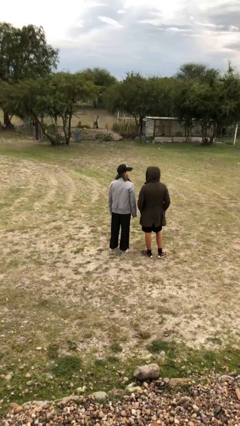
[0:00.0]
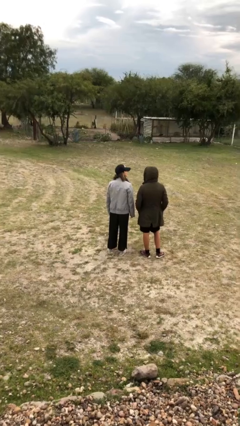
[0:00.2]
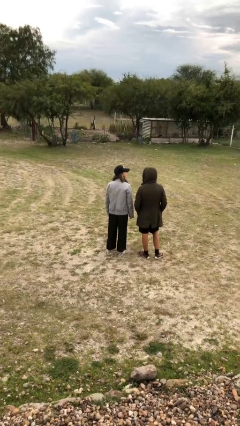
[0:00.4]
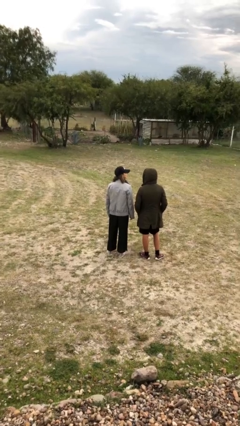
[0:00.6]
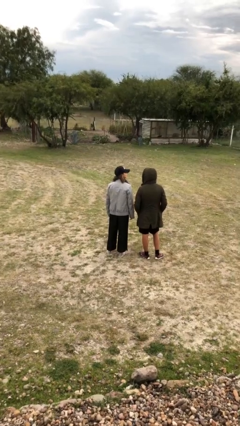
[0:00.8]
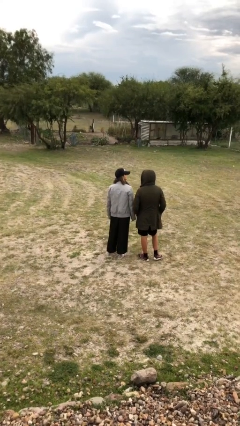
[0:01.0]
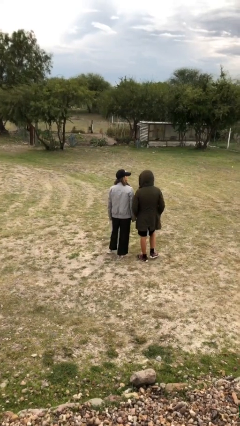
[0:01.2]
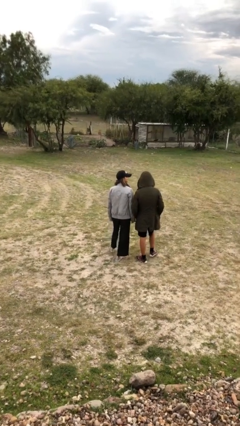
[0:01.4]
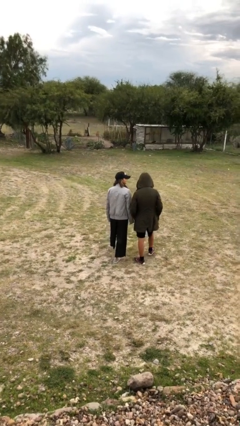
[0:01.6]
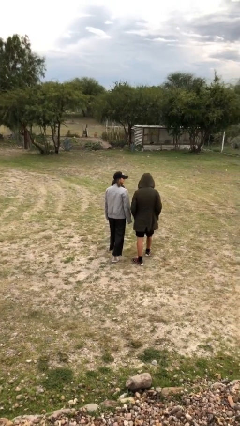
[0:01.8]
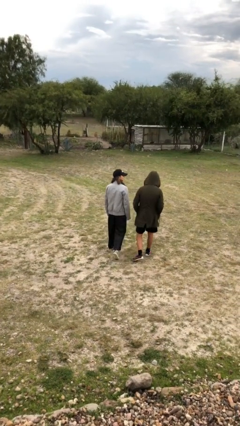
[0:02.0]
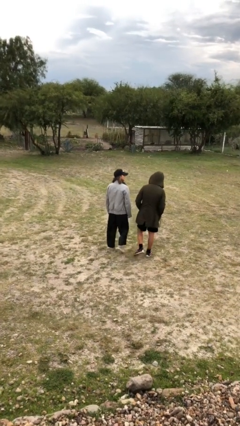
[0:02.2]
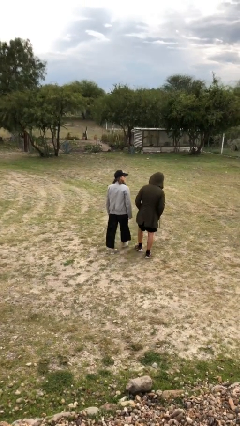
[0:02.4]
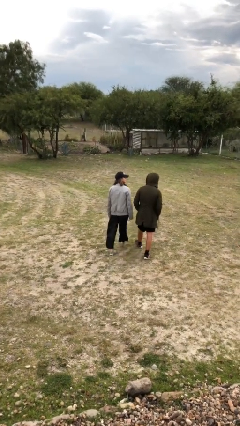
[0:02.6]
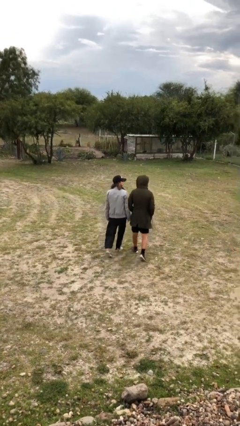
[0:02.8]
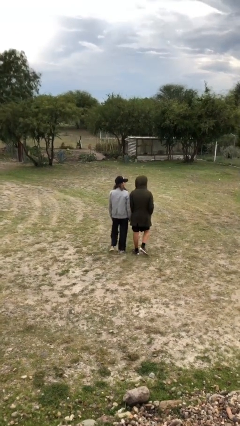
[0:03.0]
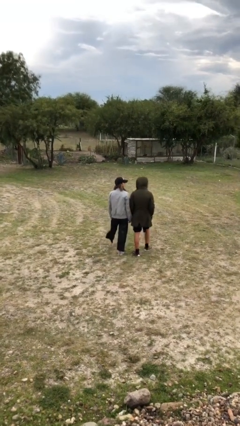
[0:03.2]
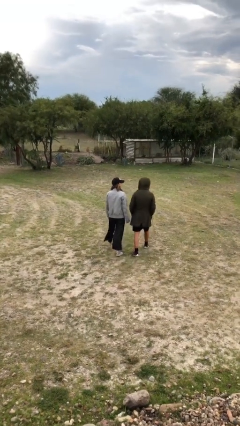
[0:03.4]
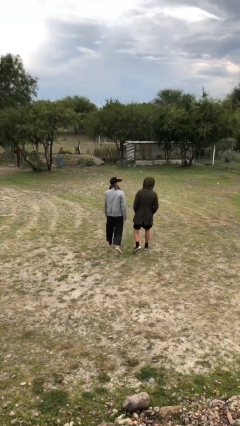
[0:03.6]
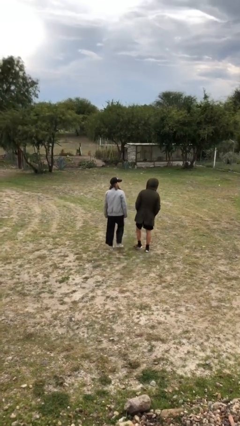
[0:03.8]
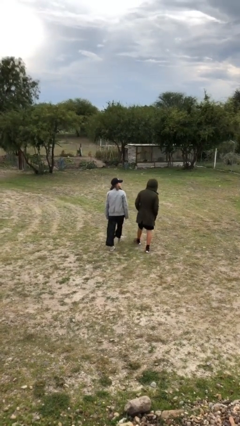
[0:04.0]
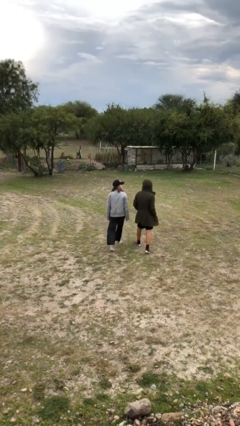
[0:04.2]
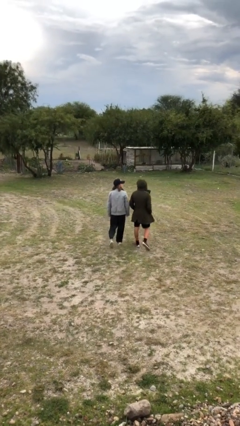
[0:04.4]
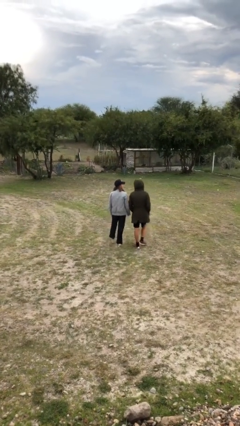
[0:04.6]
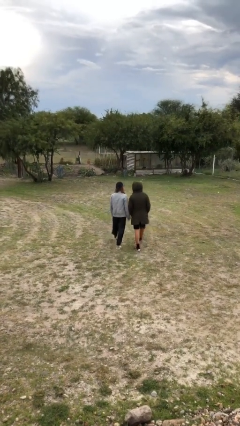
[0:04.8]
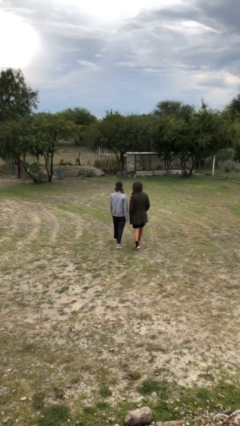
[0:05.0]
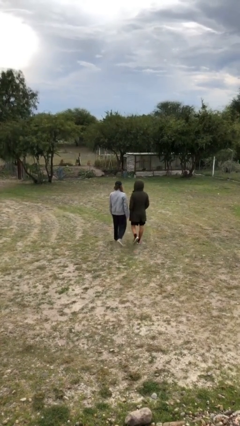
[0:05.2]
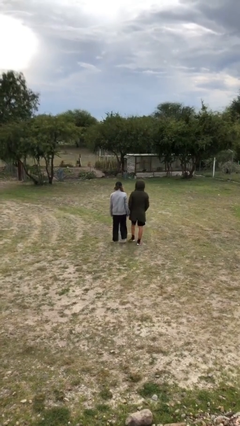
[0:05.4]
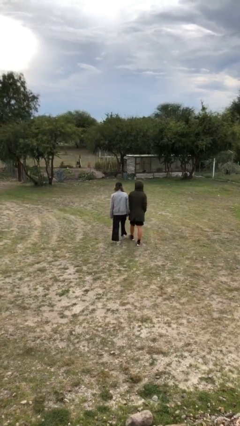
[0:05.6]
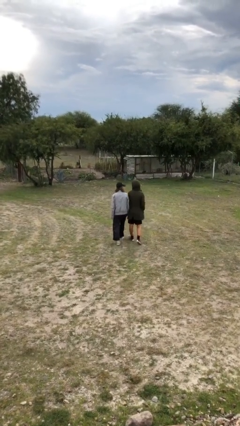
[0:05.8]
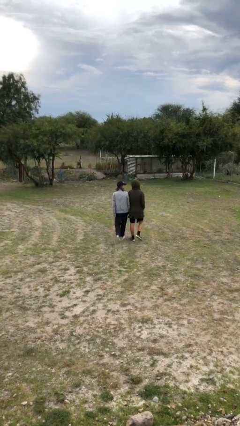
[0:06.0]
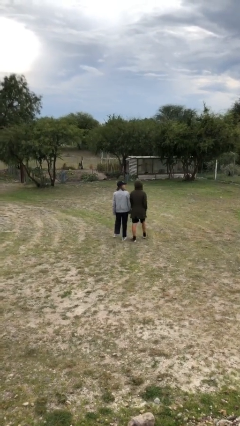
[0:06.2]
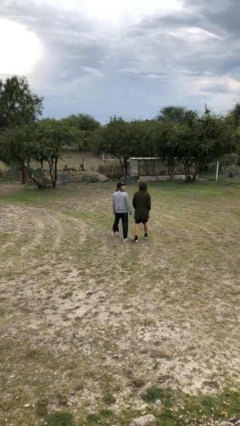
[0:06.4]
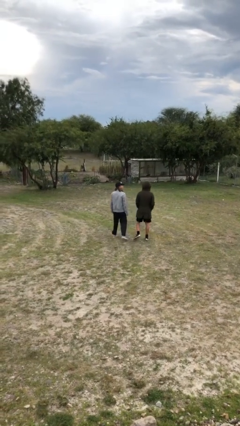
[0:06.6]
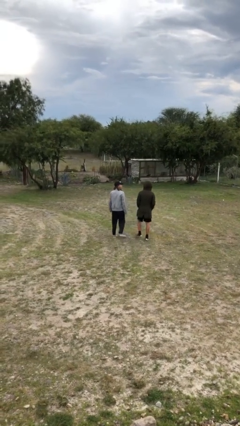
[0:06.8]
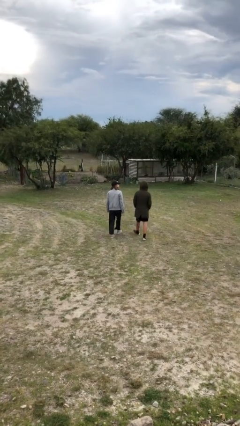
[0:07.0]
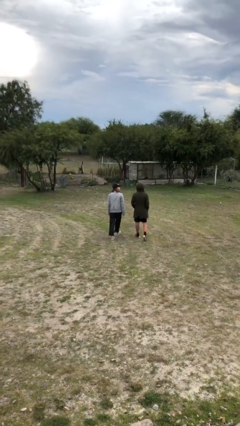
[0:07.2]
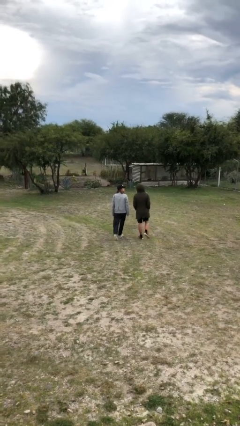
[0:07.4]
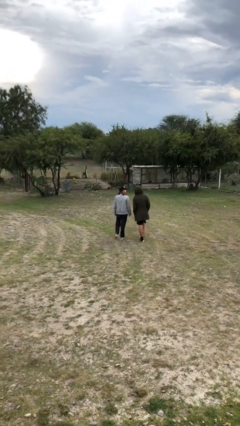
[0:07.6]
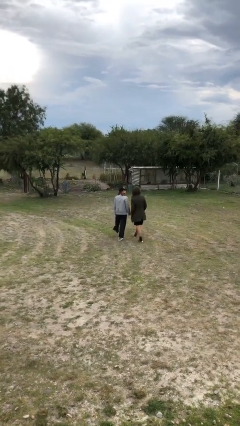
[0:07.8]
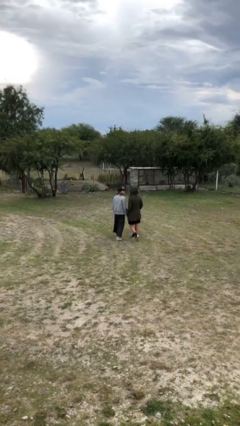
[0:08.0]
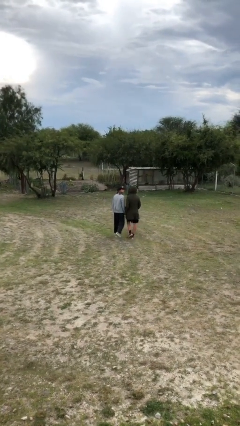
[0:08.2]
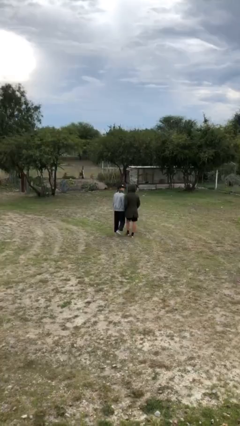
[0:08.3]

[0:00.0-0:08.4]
person talks to person

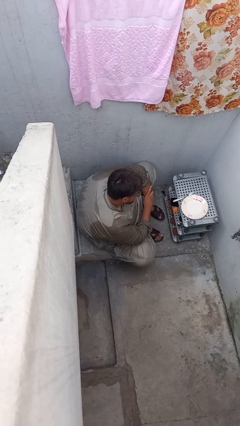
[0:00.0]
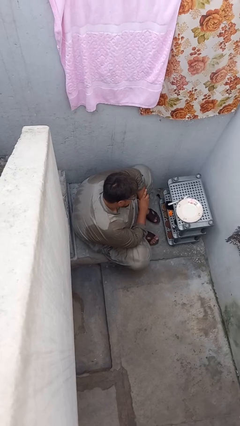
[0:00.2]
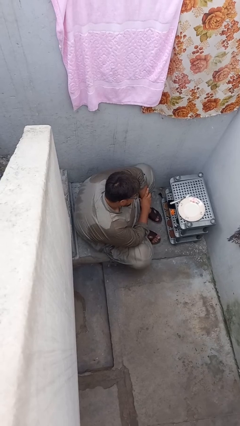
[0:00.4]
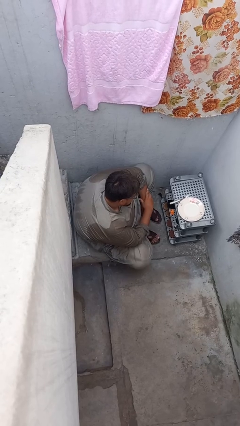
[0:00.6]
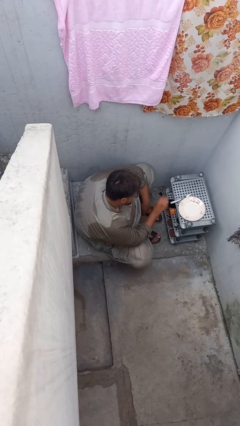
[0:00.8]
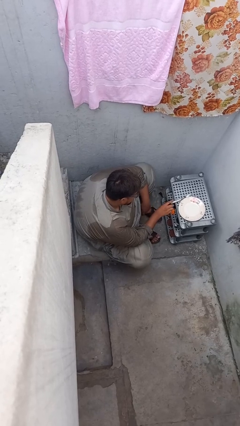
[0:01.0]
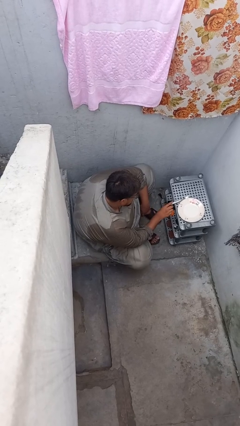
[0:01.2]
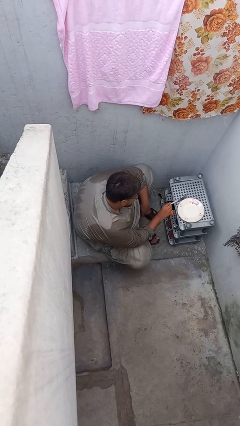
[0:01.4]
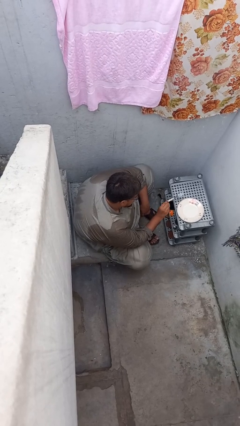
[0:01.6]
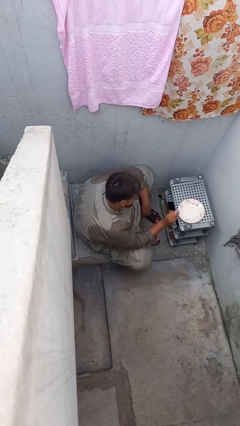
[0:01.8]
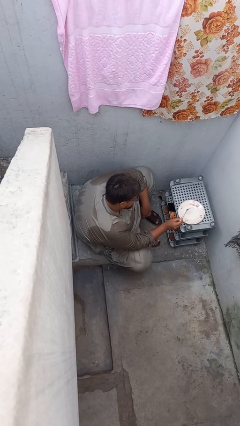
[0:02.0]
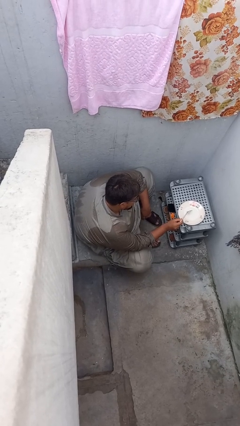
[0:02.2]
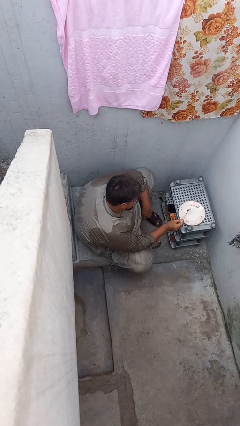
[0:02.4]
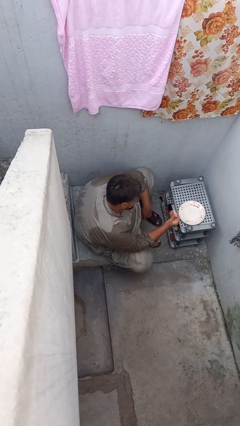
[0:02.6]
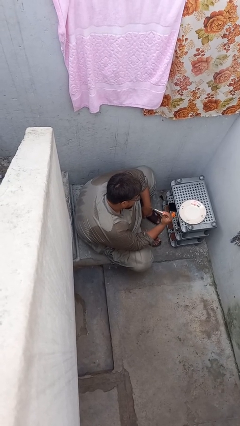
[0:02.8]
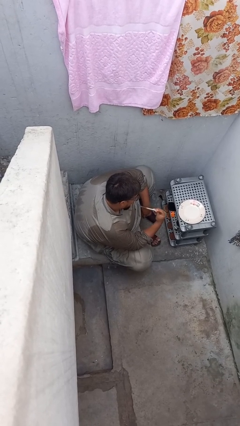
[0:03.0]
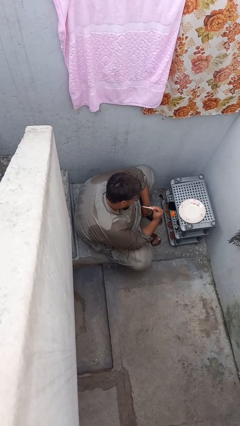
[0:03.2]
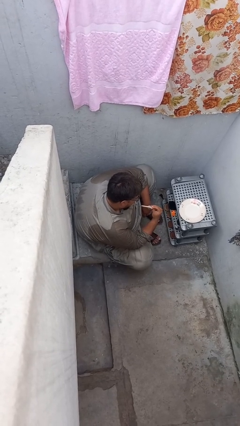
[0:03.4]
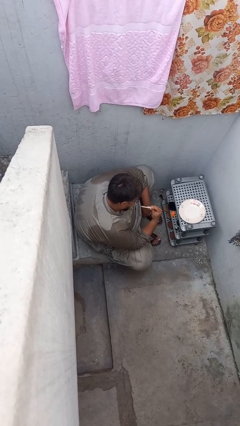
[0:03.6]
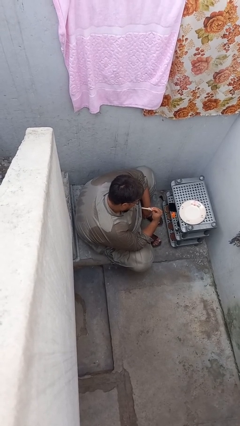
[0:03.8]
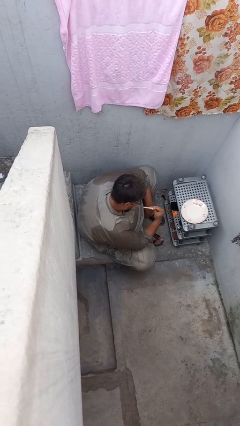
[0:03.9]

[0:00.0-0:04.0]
person eats with utensil

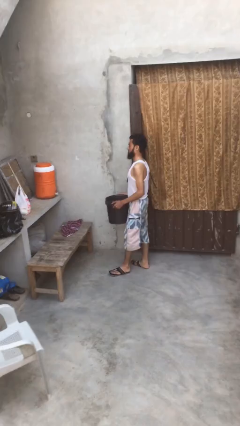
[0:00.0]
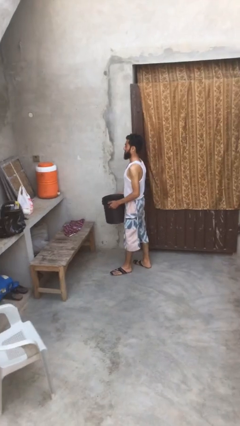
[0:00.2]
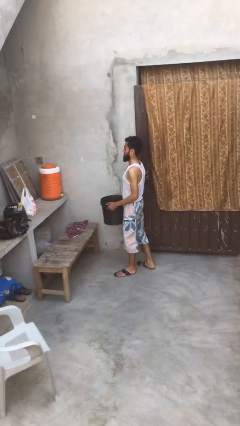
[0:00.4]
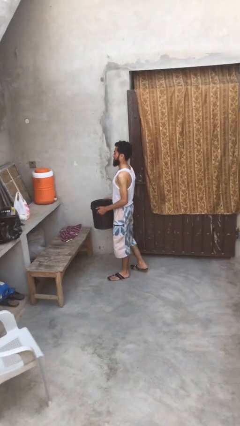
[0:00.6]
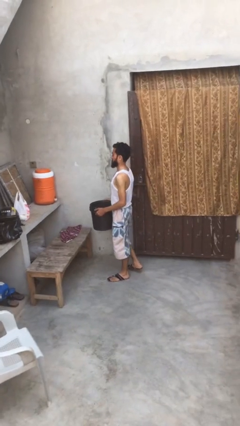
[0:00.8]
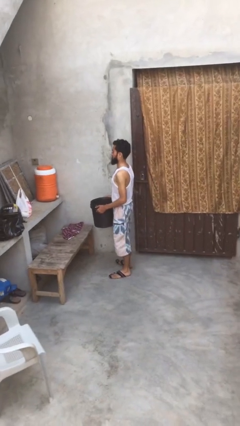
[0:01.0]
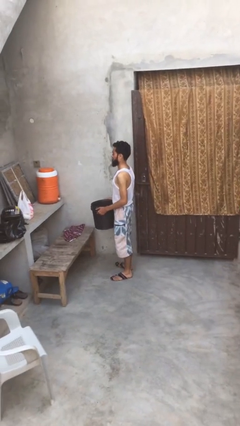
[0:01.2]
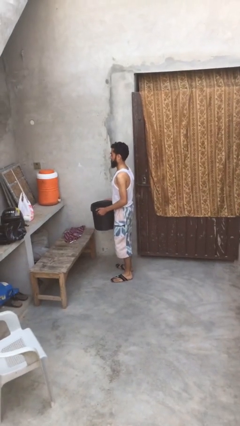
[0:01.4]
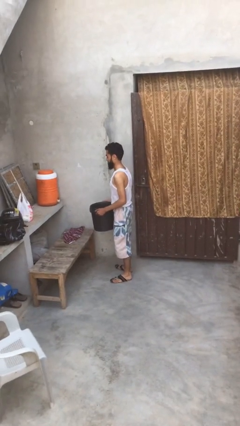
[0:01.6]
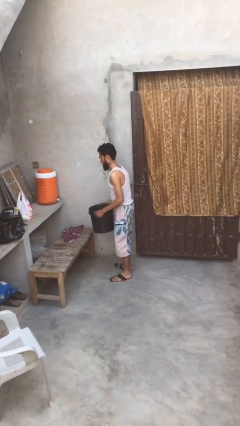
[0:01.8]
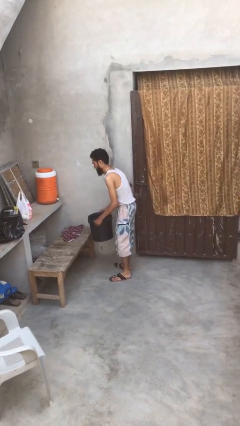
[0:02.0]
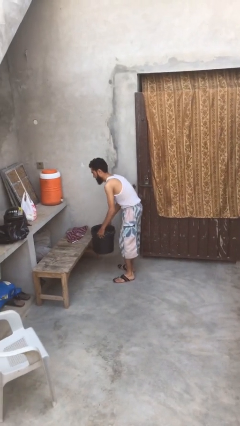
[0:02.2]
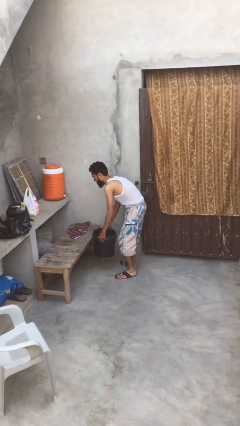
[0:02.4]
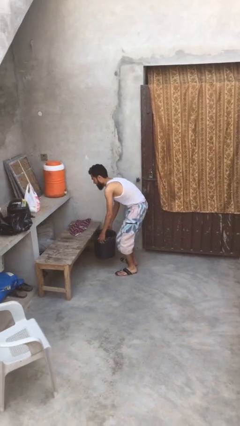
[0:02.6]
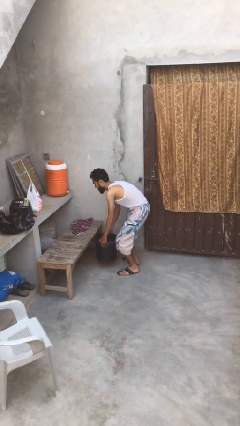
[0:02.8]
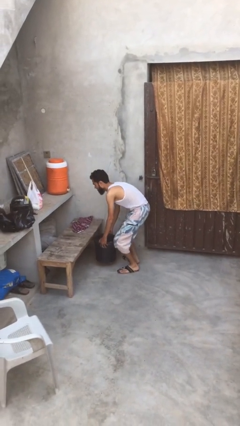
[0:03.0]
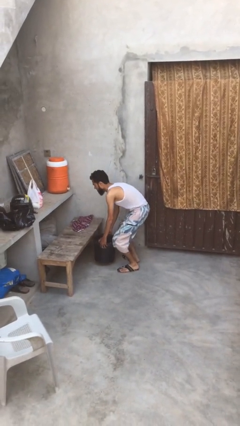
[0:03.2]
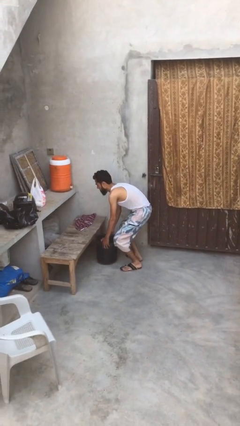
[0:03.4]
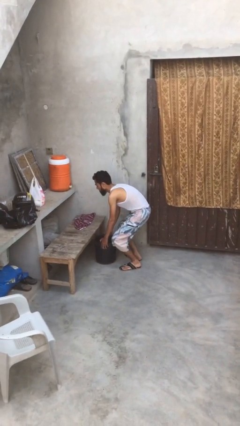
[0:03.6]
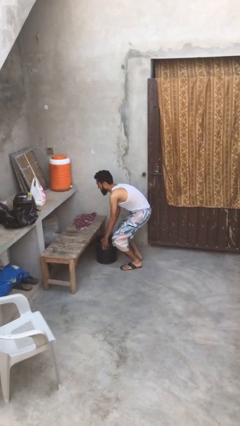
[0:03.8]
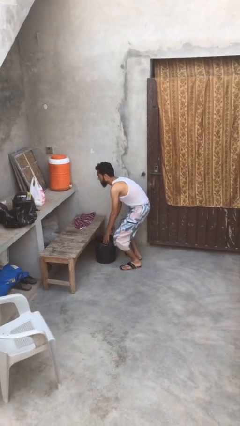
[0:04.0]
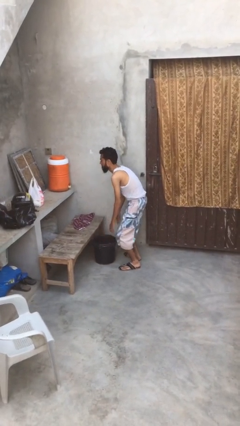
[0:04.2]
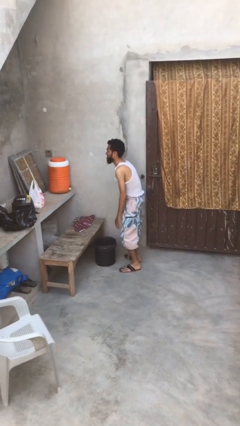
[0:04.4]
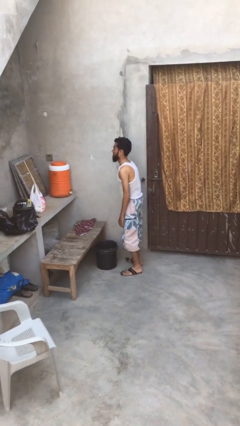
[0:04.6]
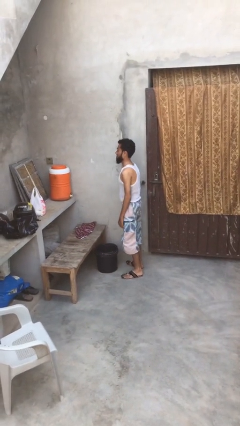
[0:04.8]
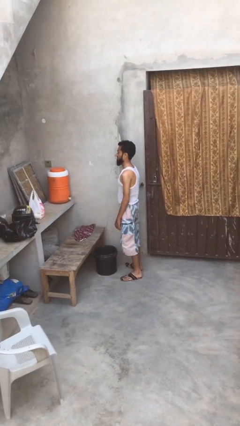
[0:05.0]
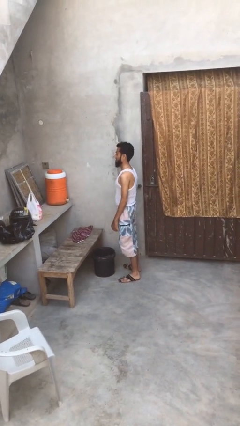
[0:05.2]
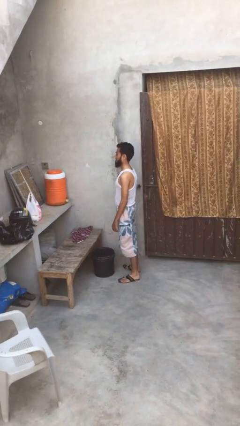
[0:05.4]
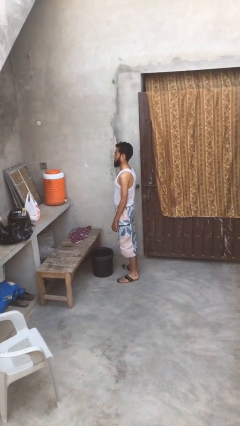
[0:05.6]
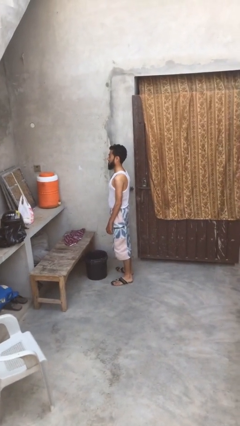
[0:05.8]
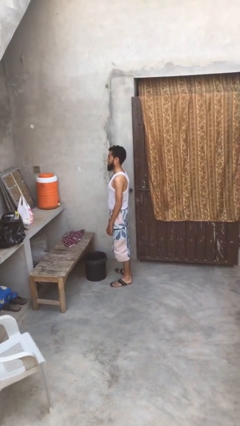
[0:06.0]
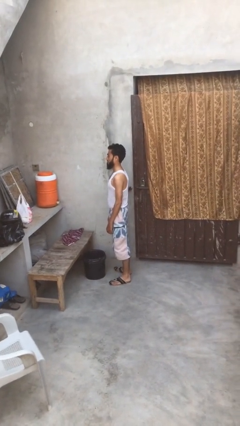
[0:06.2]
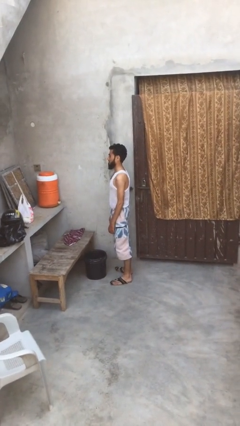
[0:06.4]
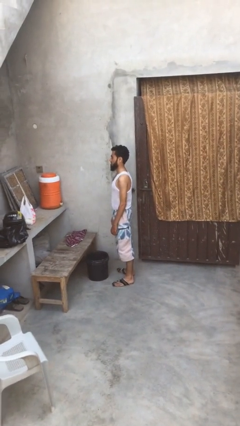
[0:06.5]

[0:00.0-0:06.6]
person puts down object on floor
